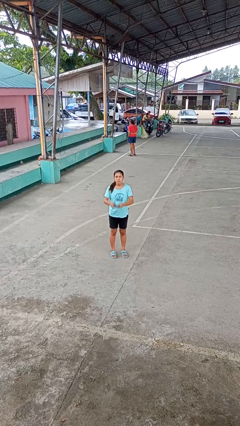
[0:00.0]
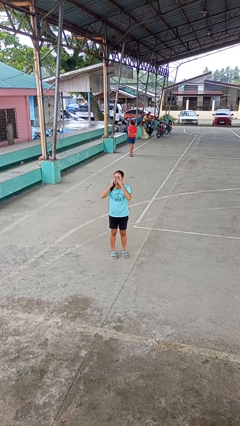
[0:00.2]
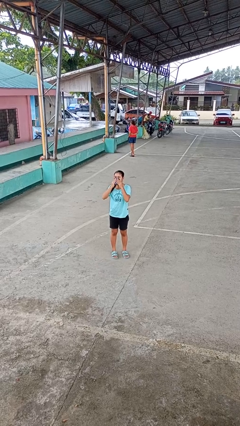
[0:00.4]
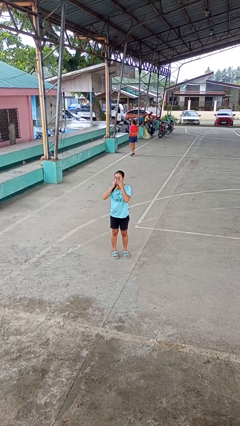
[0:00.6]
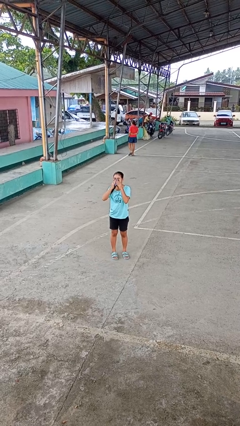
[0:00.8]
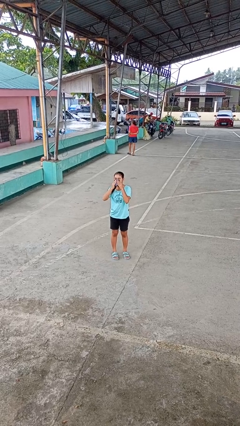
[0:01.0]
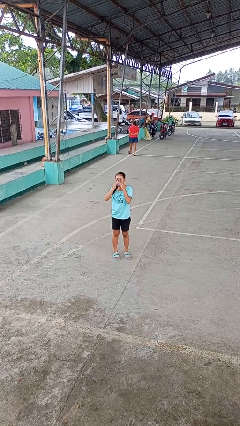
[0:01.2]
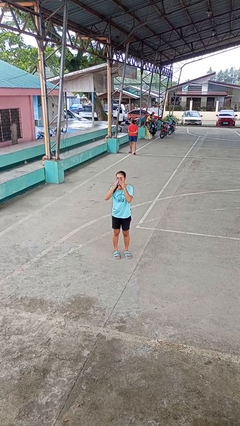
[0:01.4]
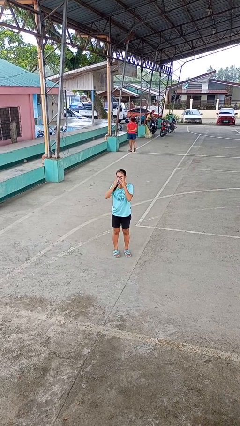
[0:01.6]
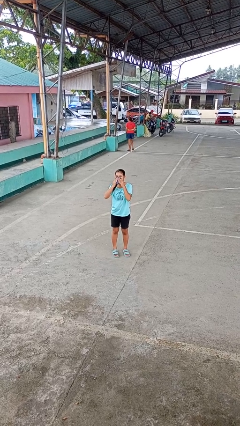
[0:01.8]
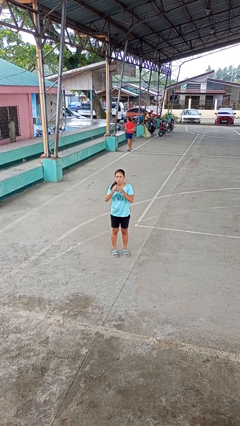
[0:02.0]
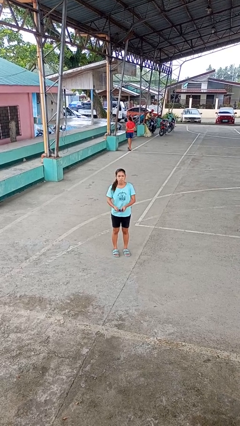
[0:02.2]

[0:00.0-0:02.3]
person blows nose

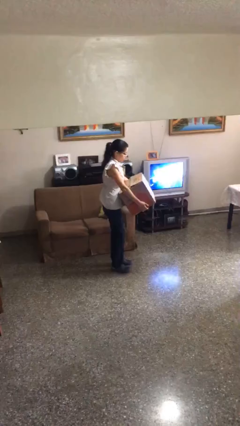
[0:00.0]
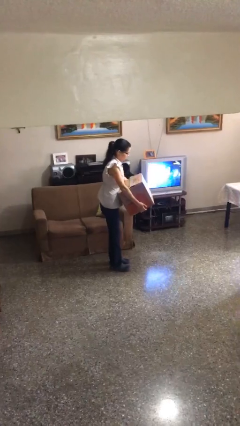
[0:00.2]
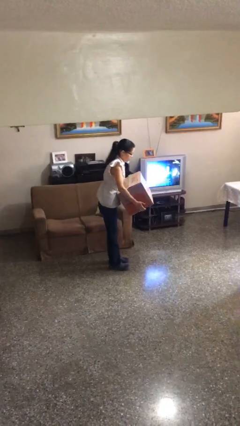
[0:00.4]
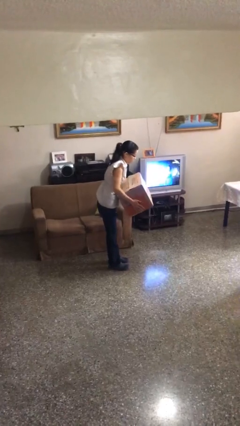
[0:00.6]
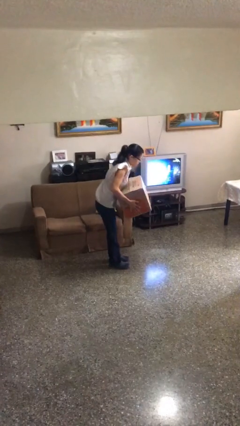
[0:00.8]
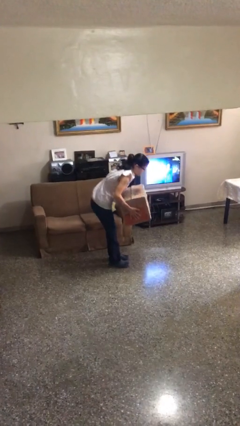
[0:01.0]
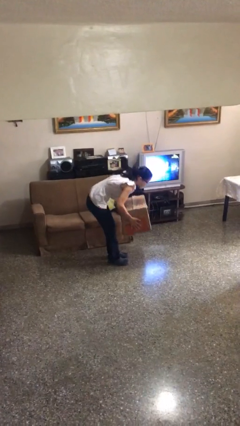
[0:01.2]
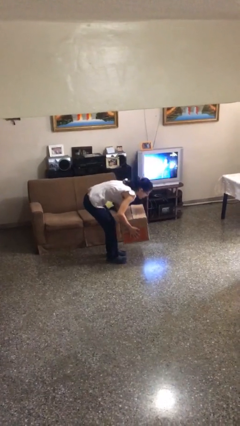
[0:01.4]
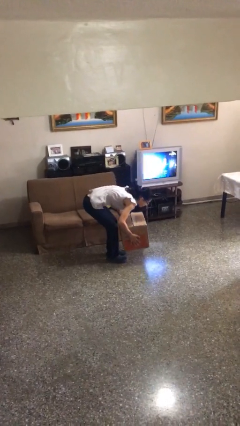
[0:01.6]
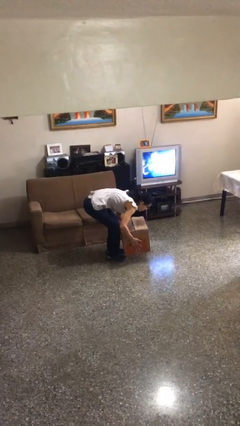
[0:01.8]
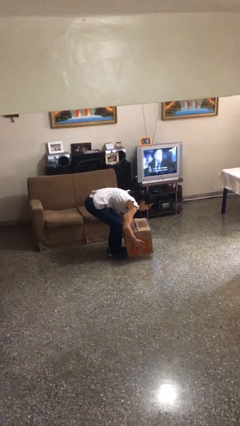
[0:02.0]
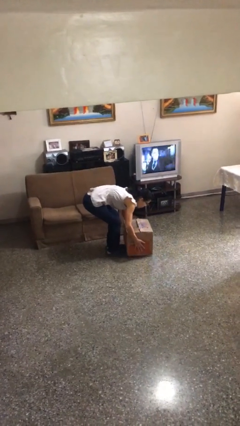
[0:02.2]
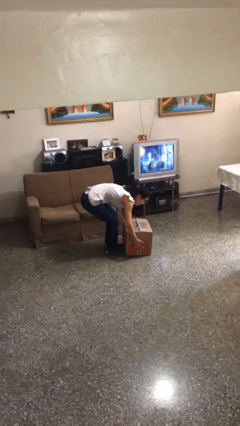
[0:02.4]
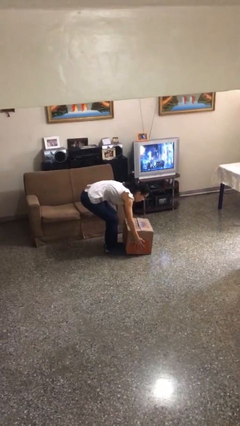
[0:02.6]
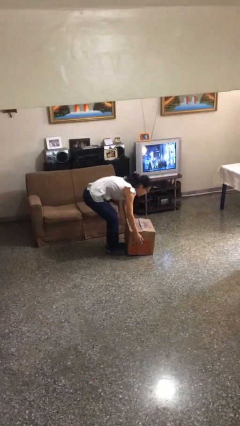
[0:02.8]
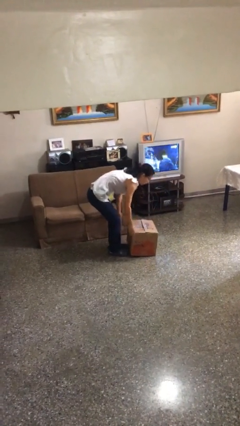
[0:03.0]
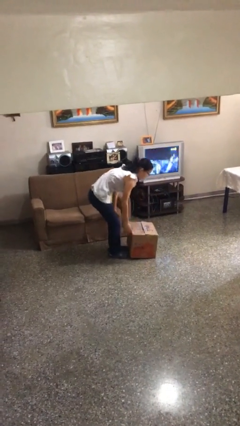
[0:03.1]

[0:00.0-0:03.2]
person puts down object on floor

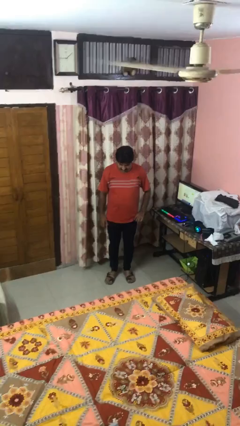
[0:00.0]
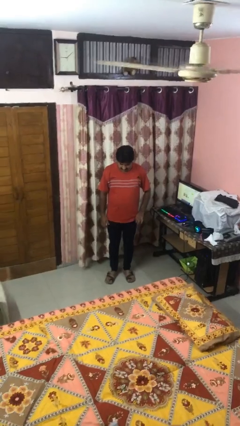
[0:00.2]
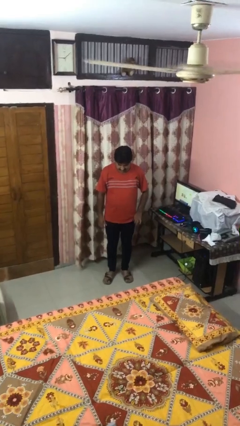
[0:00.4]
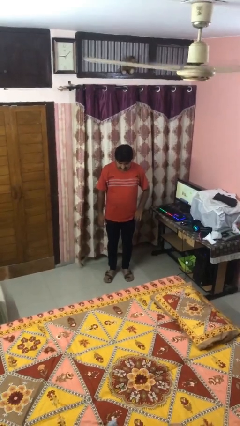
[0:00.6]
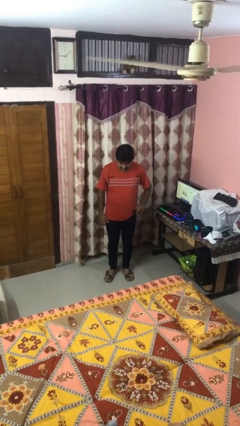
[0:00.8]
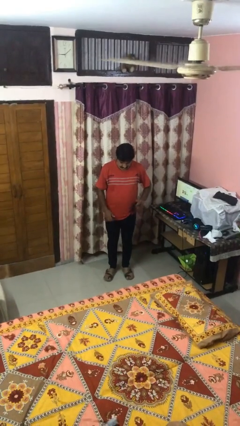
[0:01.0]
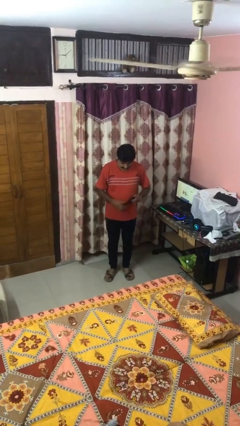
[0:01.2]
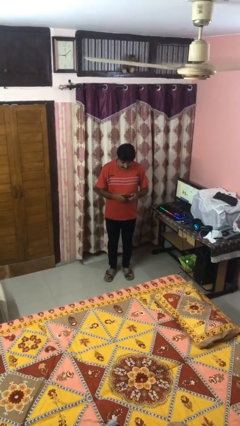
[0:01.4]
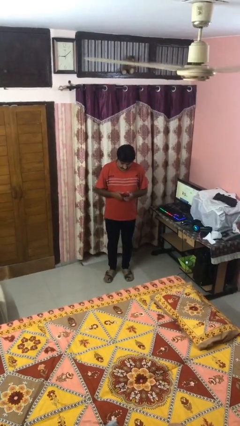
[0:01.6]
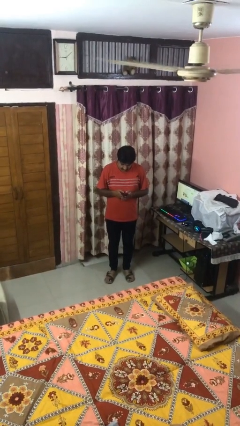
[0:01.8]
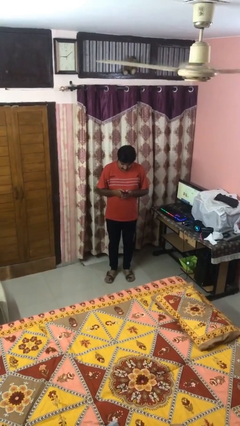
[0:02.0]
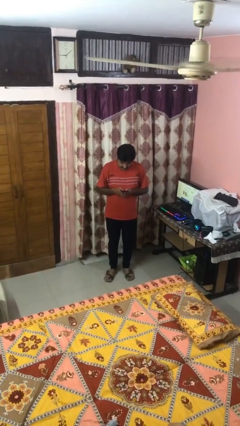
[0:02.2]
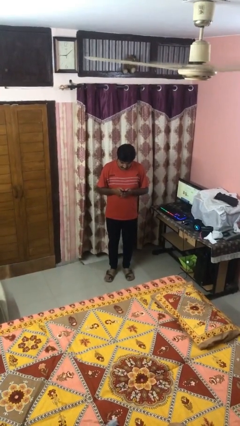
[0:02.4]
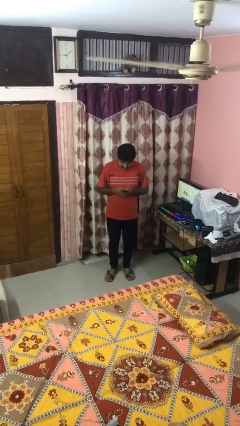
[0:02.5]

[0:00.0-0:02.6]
person takes phone from pocket

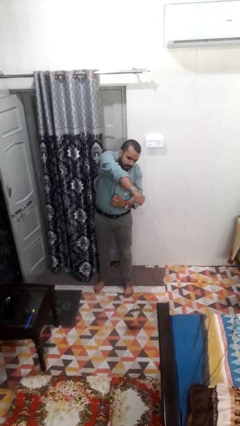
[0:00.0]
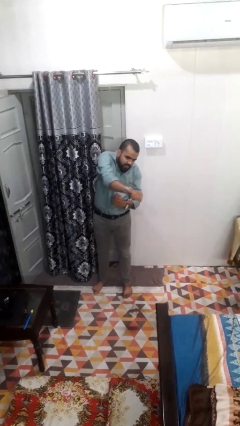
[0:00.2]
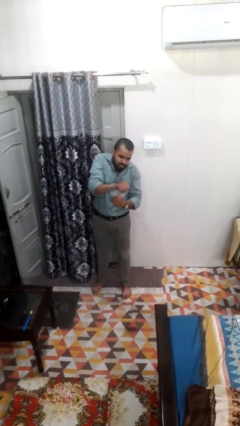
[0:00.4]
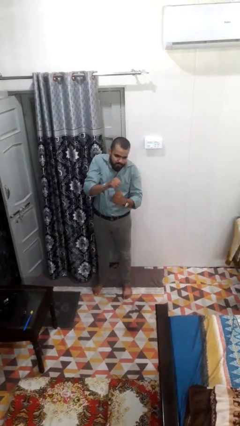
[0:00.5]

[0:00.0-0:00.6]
person punches

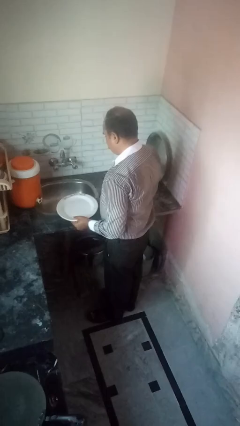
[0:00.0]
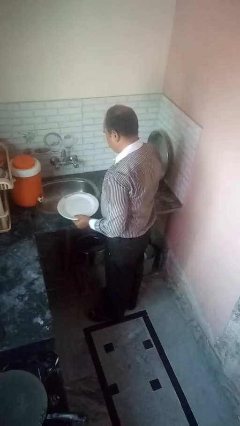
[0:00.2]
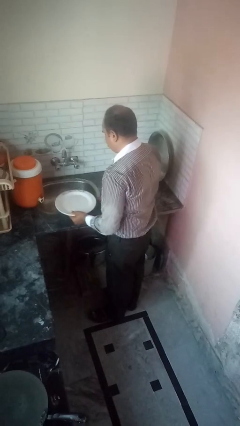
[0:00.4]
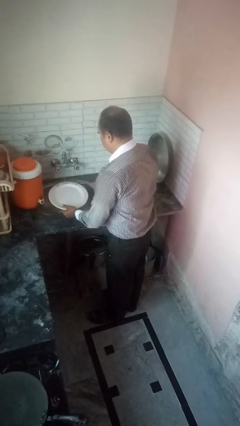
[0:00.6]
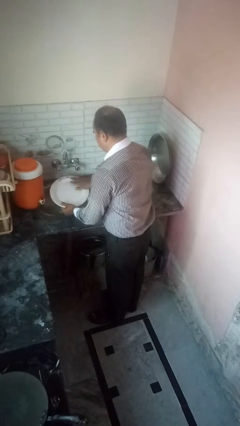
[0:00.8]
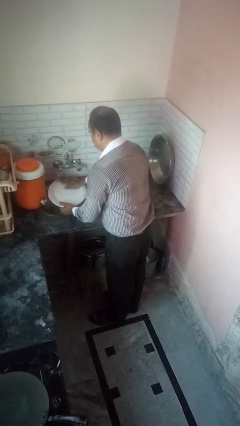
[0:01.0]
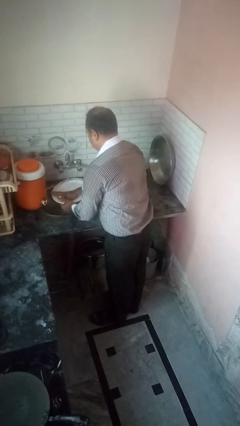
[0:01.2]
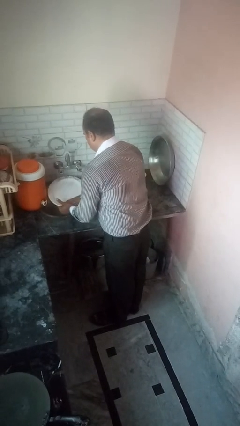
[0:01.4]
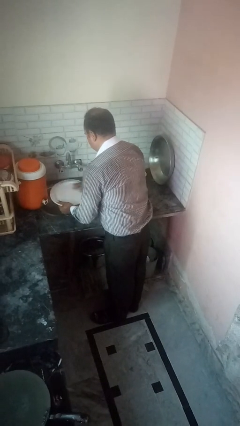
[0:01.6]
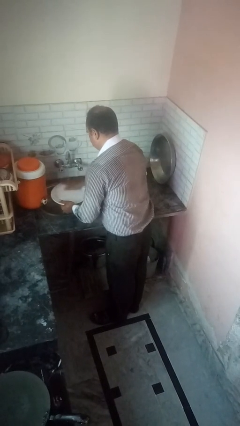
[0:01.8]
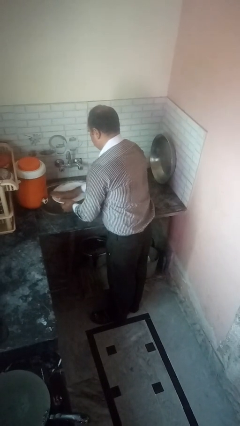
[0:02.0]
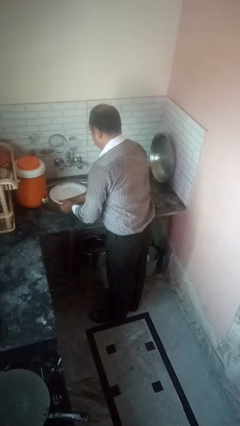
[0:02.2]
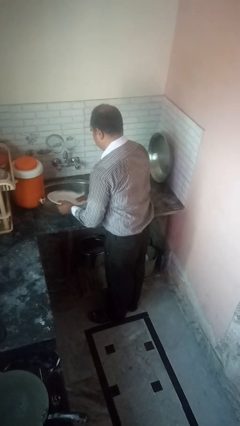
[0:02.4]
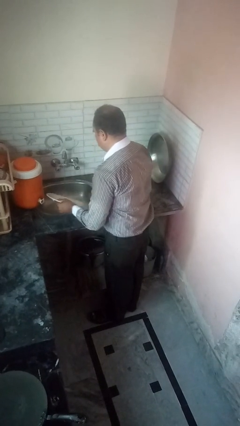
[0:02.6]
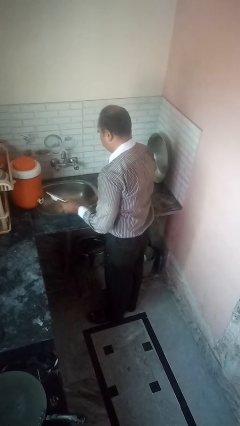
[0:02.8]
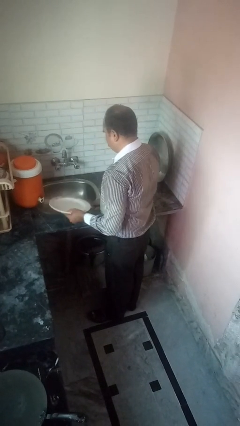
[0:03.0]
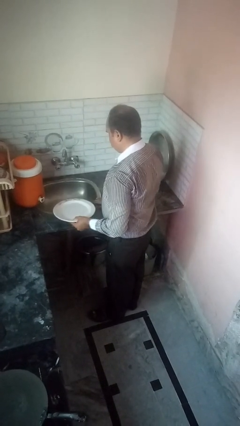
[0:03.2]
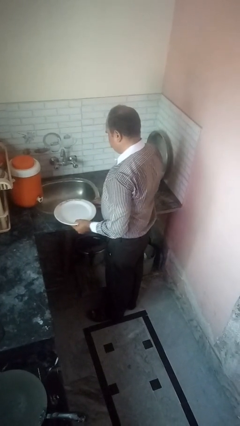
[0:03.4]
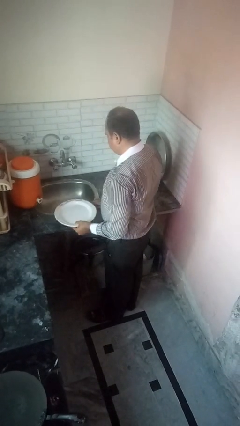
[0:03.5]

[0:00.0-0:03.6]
person washes dish

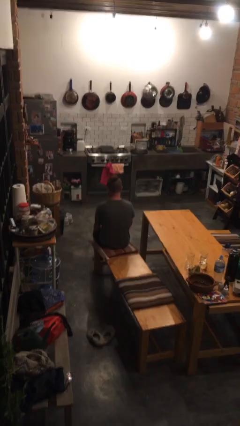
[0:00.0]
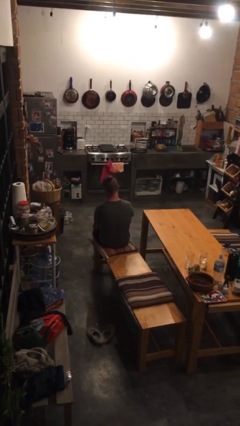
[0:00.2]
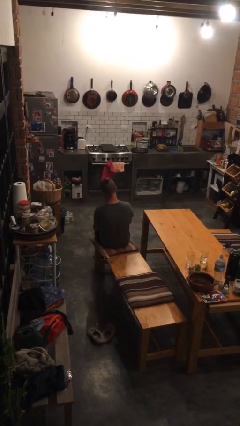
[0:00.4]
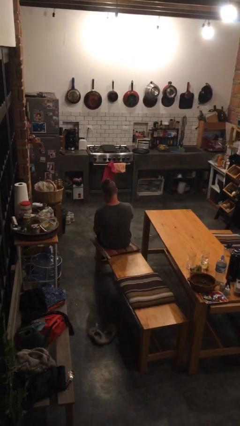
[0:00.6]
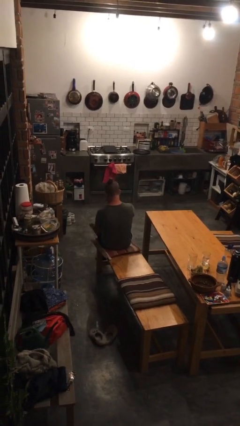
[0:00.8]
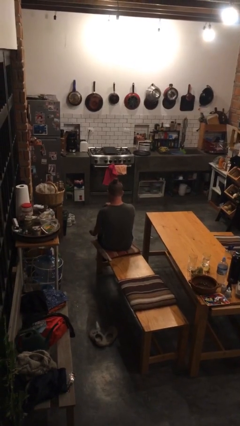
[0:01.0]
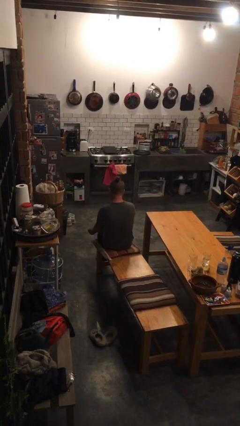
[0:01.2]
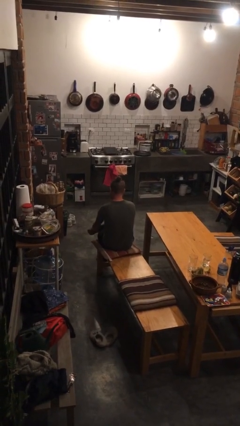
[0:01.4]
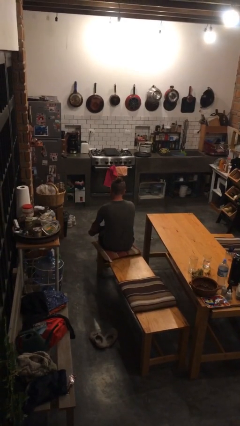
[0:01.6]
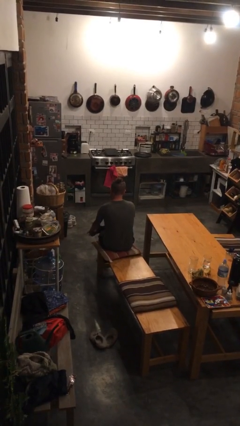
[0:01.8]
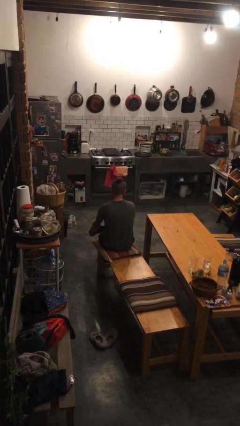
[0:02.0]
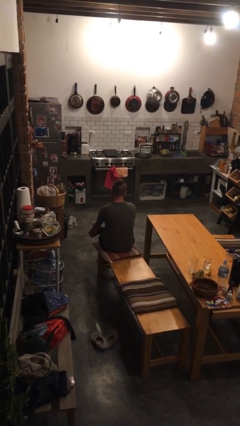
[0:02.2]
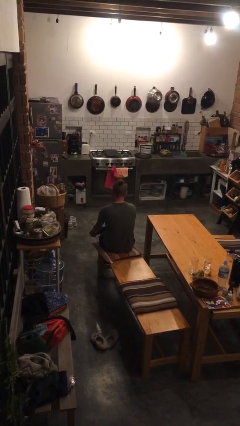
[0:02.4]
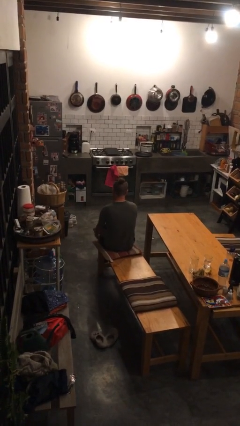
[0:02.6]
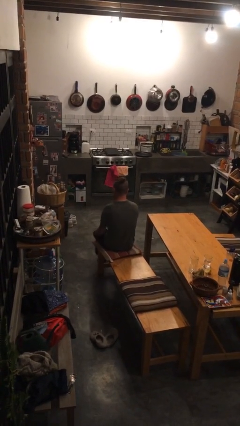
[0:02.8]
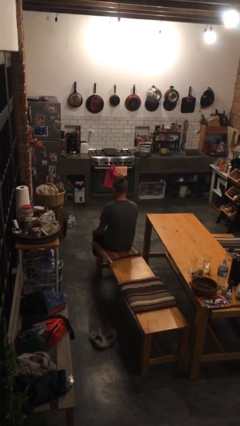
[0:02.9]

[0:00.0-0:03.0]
person crosses legs

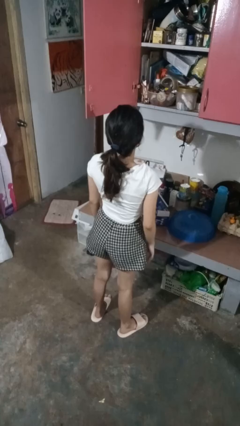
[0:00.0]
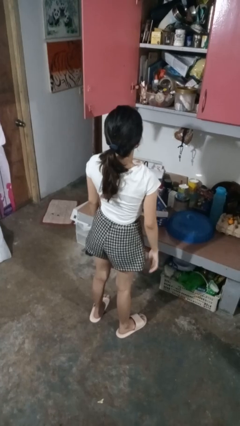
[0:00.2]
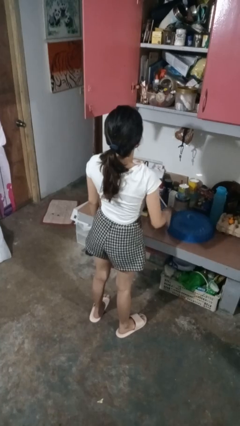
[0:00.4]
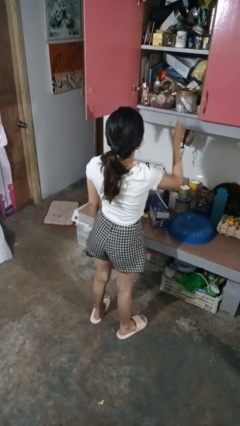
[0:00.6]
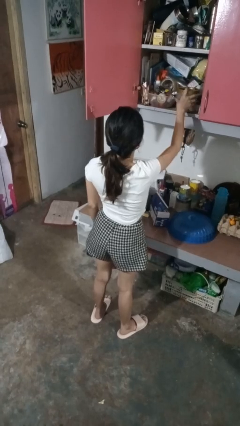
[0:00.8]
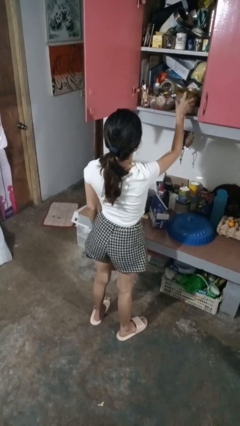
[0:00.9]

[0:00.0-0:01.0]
person picks up object from cabinet

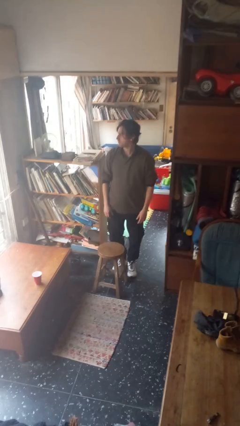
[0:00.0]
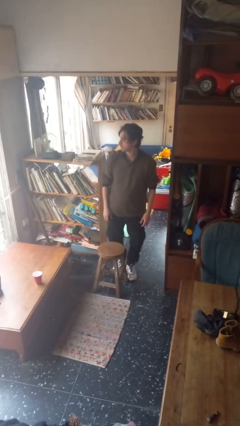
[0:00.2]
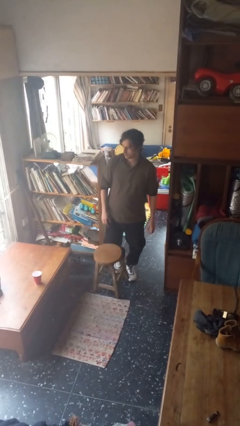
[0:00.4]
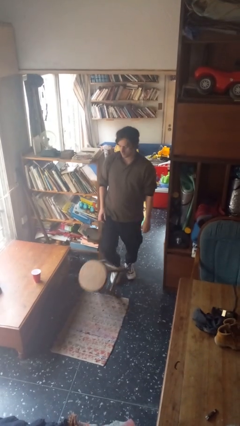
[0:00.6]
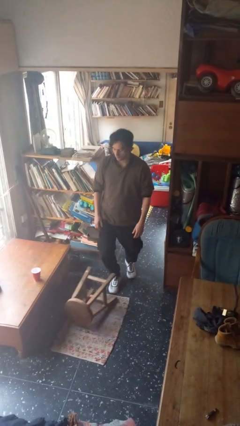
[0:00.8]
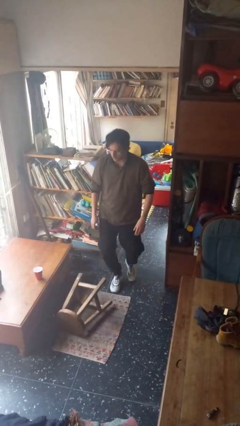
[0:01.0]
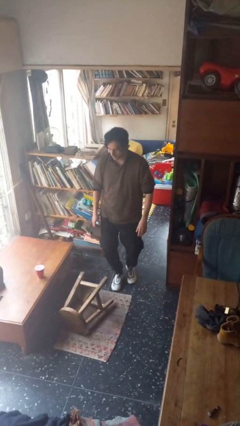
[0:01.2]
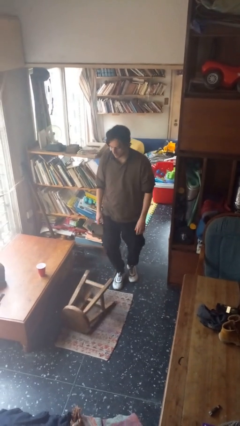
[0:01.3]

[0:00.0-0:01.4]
person knocks over furniture
